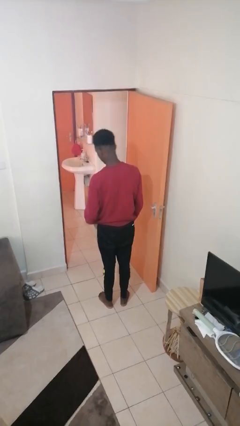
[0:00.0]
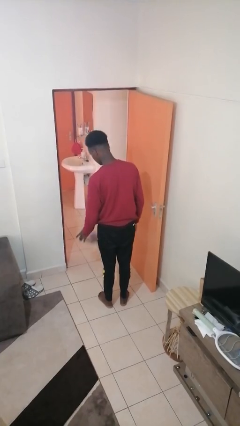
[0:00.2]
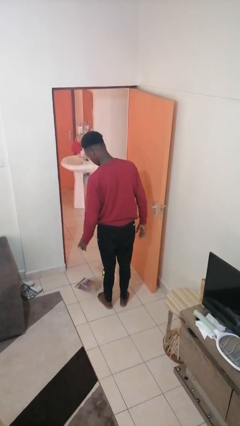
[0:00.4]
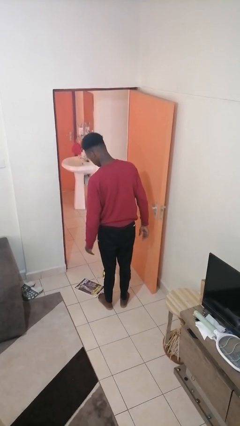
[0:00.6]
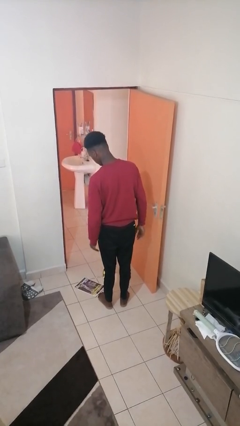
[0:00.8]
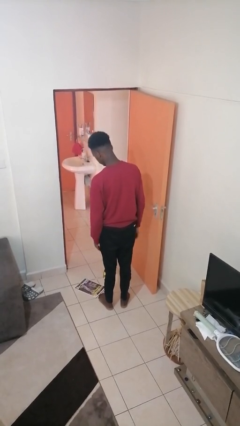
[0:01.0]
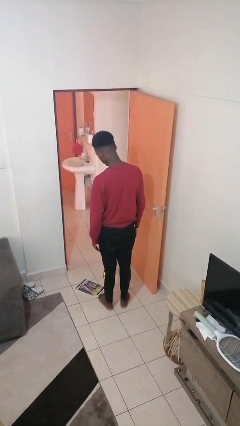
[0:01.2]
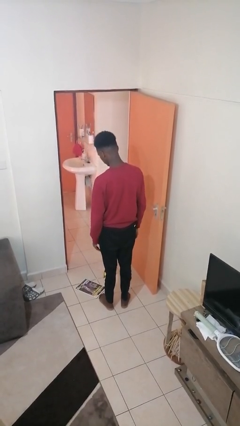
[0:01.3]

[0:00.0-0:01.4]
person drops object

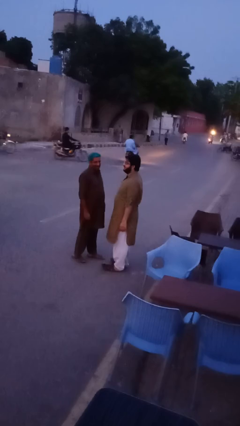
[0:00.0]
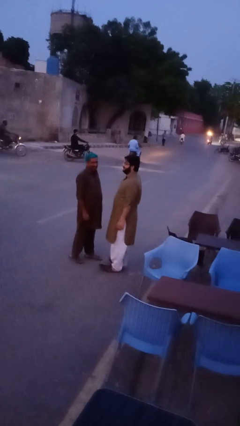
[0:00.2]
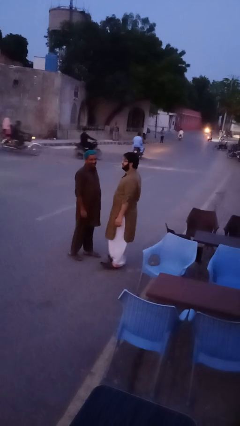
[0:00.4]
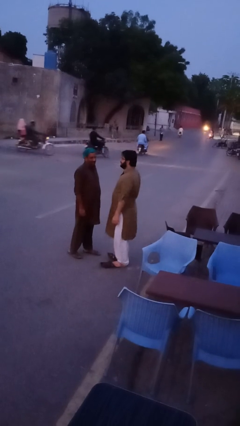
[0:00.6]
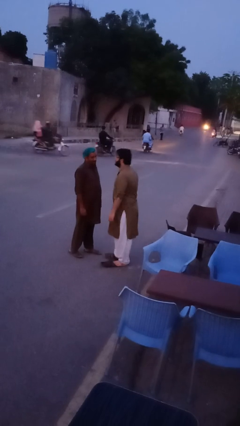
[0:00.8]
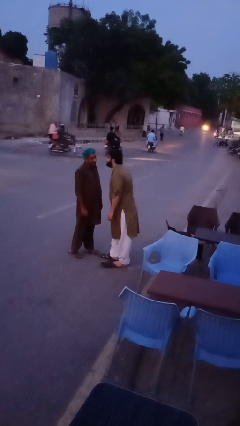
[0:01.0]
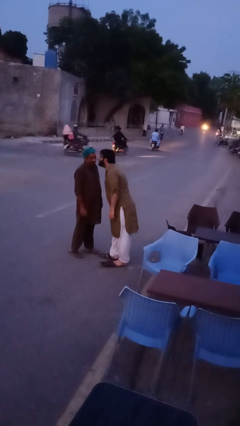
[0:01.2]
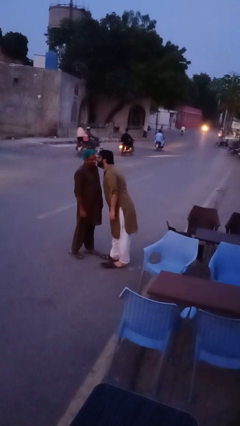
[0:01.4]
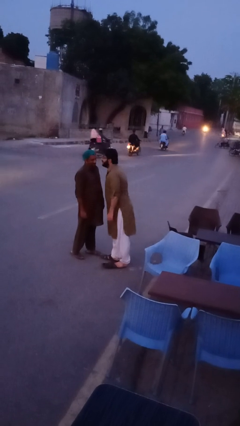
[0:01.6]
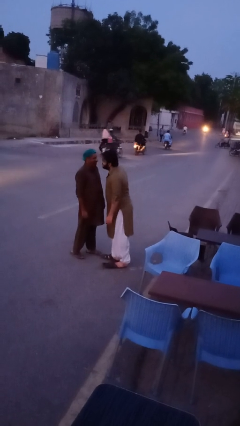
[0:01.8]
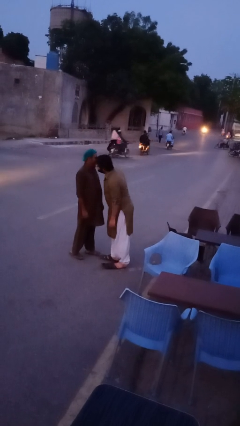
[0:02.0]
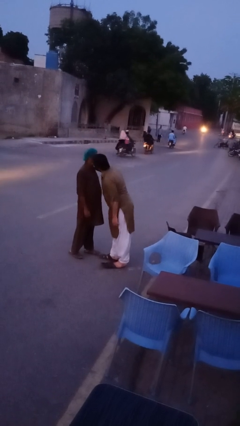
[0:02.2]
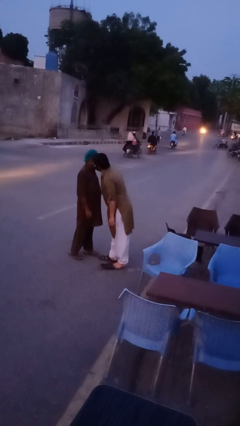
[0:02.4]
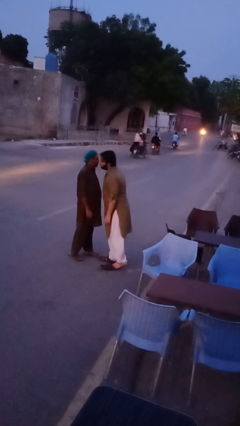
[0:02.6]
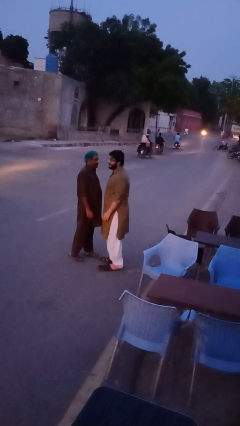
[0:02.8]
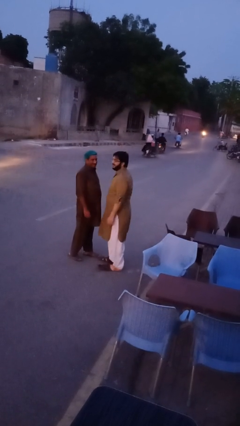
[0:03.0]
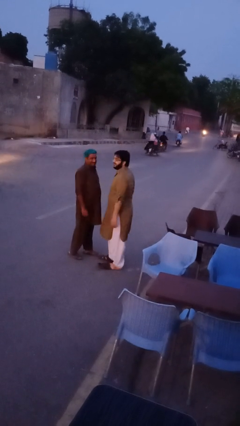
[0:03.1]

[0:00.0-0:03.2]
person kisses cheek of person

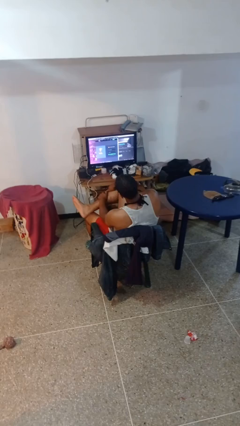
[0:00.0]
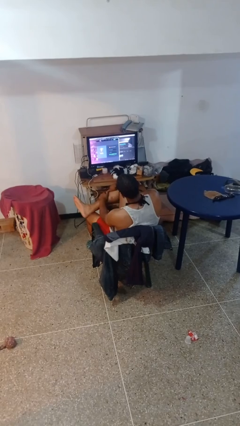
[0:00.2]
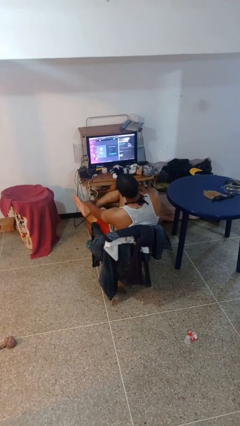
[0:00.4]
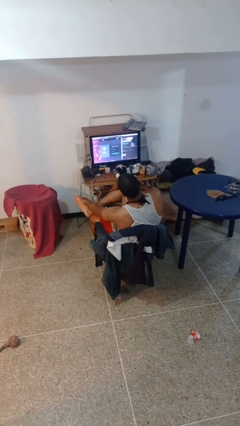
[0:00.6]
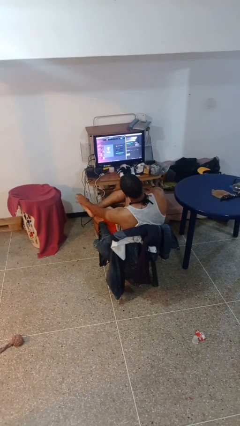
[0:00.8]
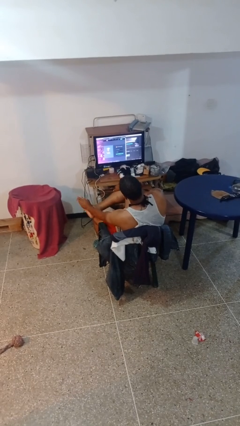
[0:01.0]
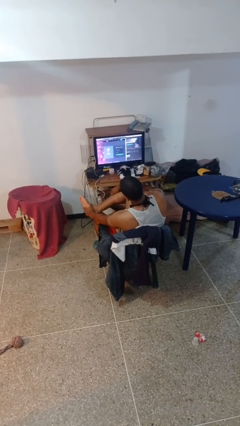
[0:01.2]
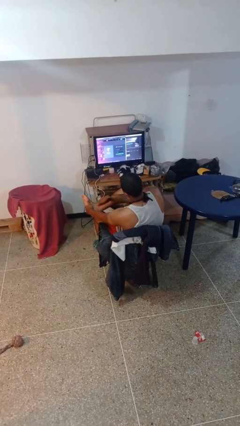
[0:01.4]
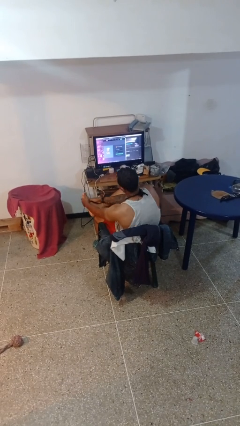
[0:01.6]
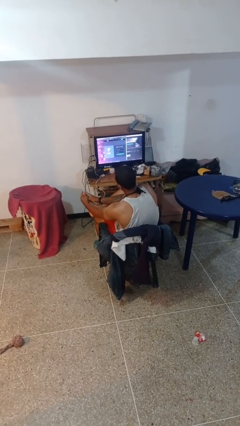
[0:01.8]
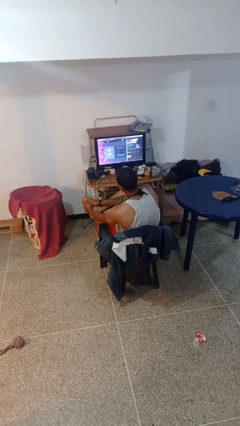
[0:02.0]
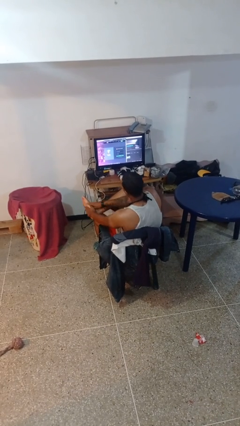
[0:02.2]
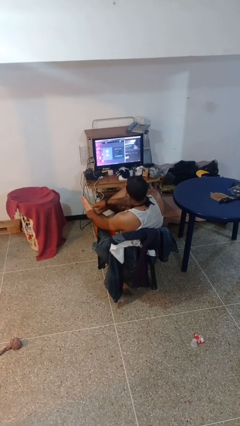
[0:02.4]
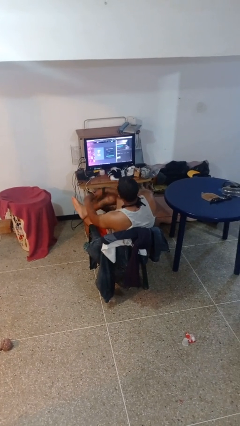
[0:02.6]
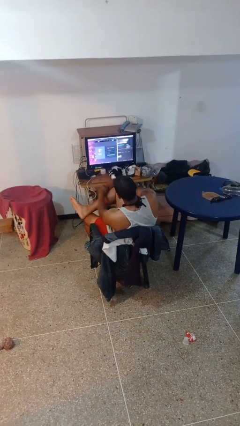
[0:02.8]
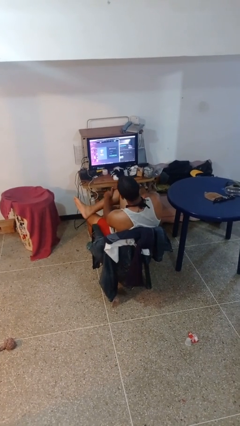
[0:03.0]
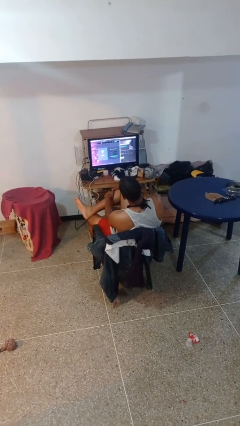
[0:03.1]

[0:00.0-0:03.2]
person rubs foot

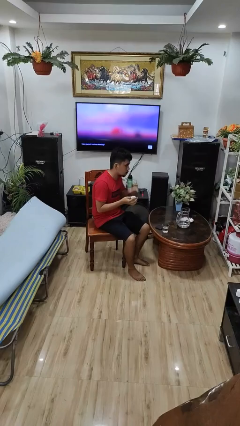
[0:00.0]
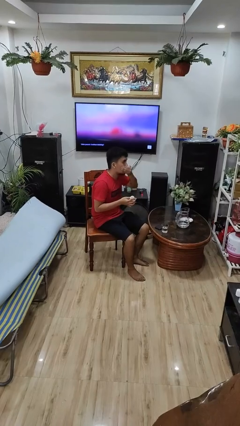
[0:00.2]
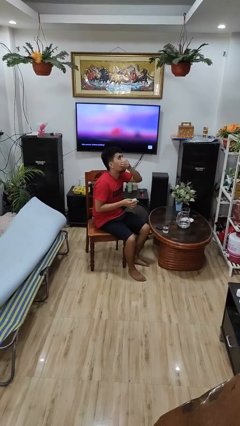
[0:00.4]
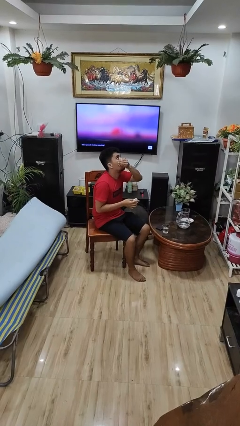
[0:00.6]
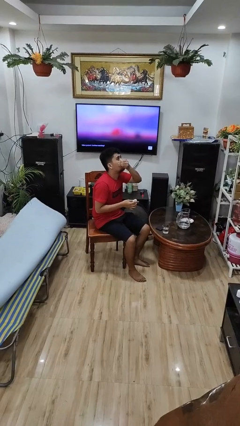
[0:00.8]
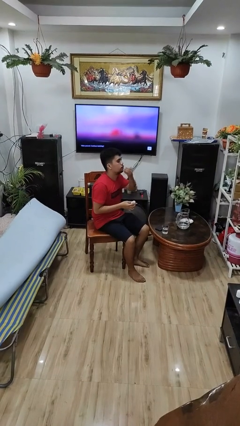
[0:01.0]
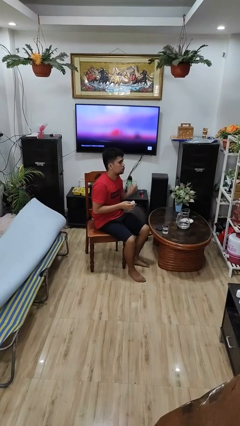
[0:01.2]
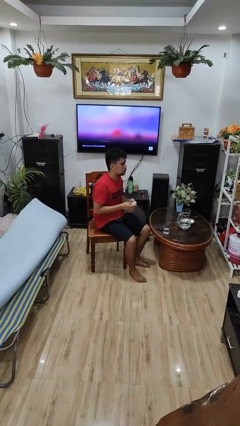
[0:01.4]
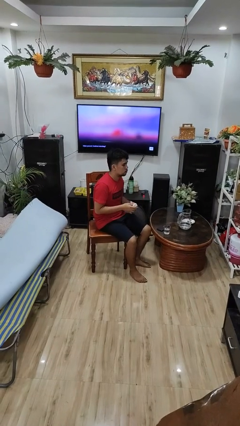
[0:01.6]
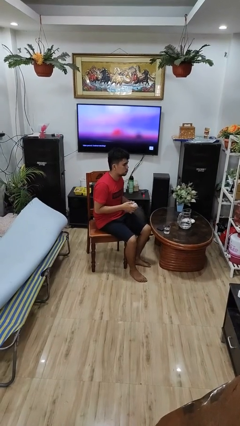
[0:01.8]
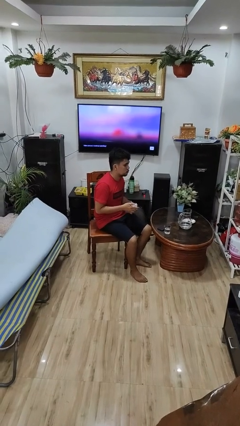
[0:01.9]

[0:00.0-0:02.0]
person takes medicine pills

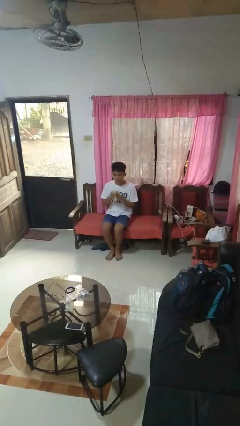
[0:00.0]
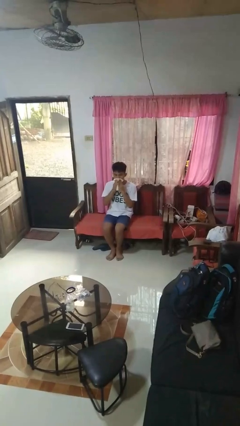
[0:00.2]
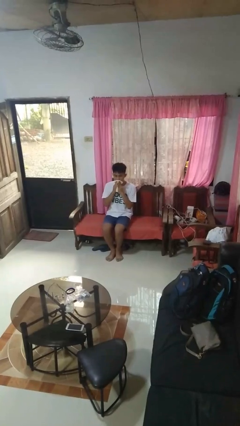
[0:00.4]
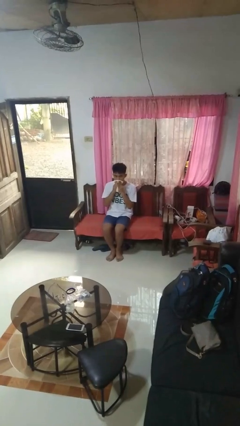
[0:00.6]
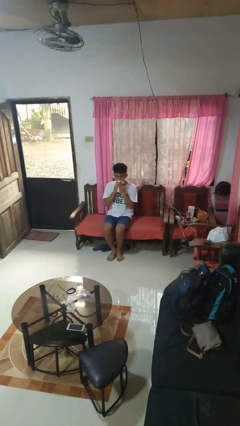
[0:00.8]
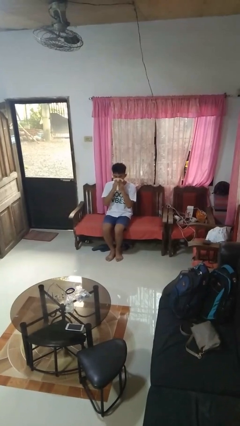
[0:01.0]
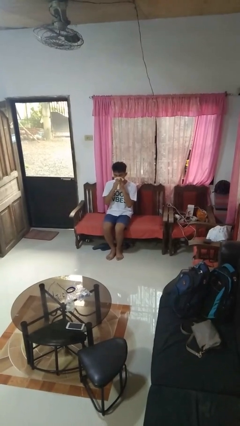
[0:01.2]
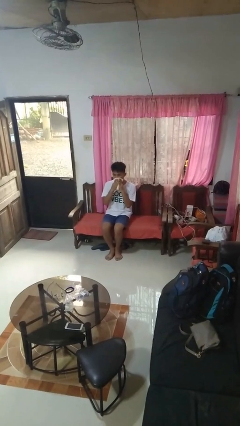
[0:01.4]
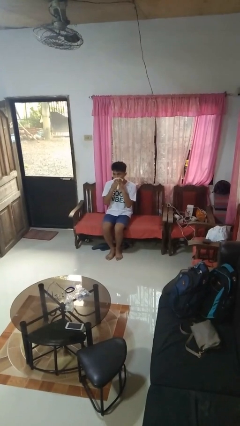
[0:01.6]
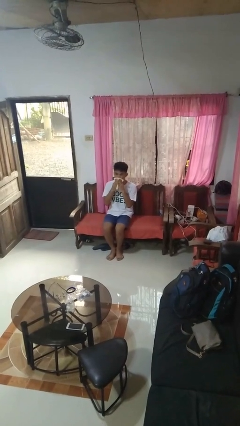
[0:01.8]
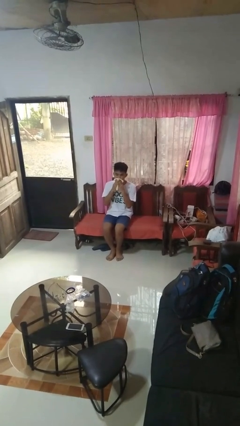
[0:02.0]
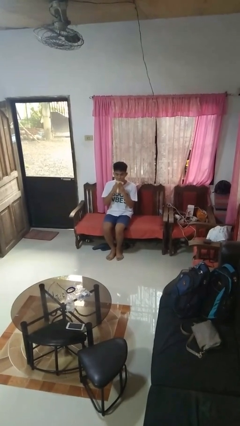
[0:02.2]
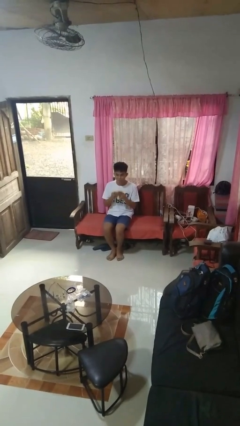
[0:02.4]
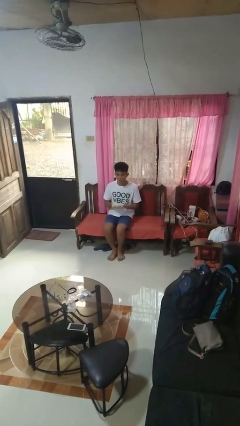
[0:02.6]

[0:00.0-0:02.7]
person wipes mouth with napkin

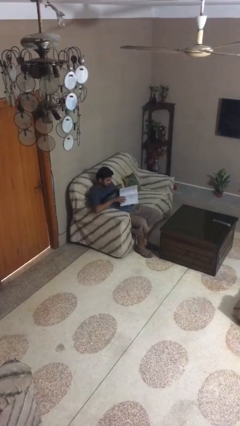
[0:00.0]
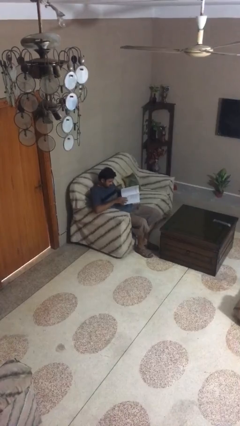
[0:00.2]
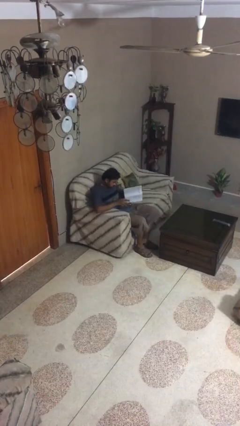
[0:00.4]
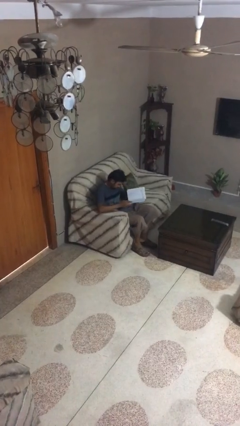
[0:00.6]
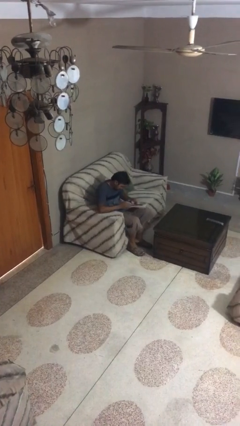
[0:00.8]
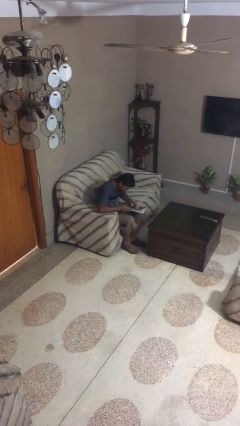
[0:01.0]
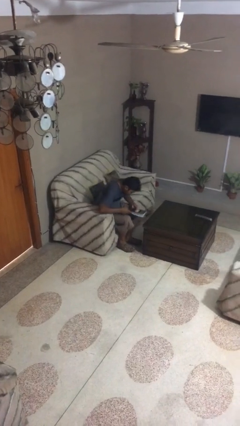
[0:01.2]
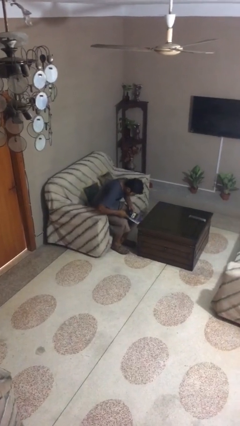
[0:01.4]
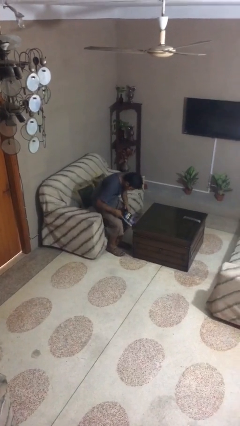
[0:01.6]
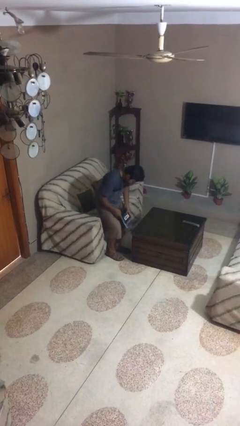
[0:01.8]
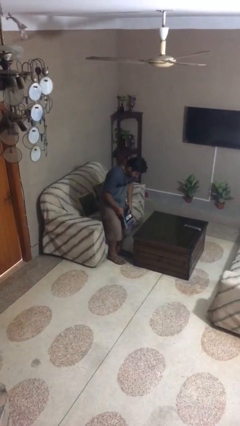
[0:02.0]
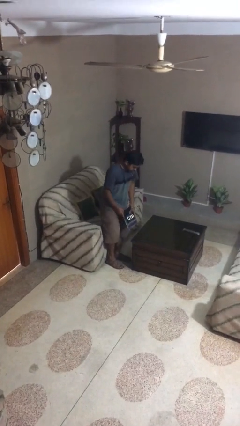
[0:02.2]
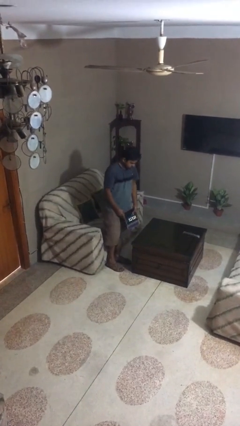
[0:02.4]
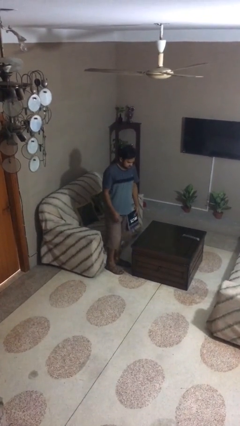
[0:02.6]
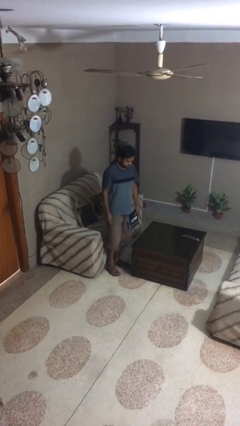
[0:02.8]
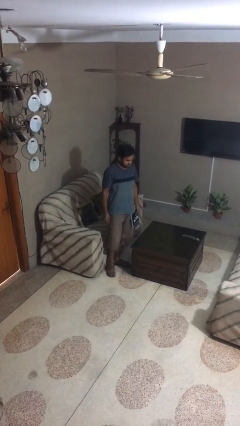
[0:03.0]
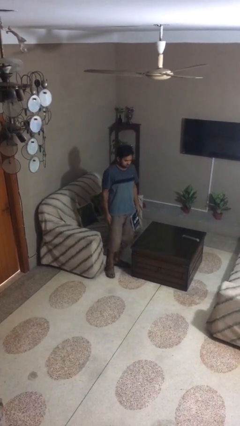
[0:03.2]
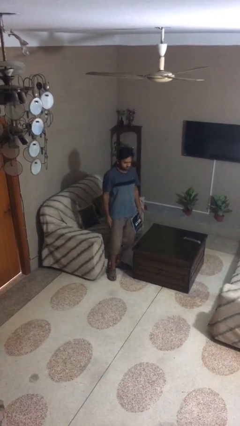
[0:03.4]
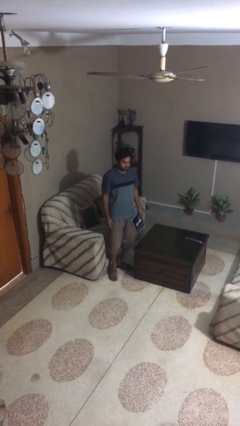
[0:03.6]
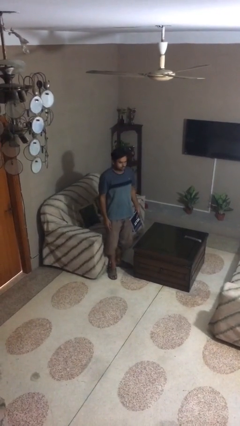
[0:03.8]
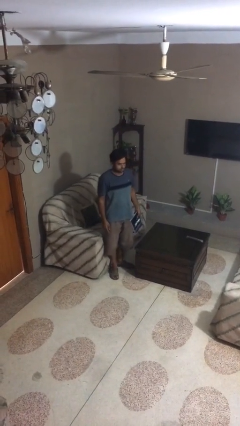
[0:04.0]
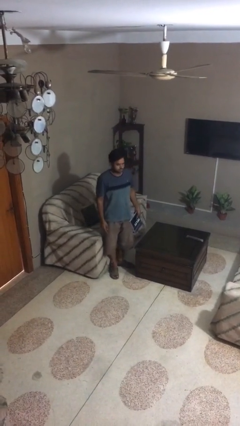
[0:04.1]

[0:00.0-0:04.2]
person stands up

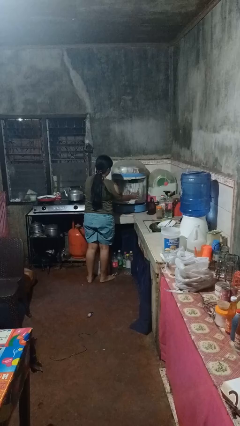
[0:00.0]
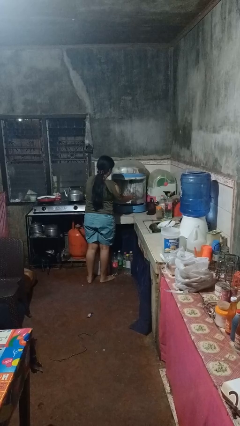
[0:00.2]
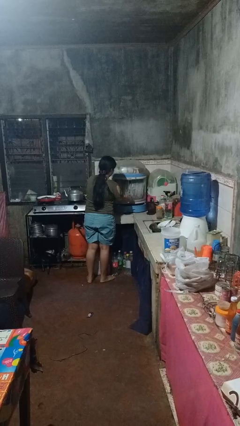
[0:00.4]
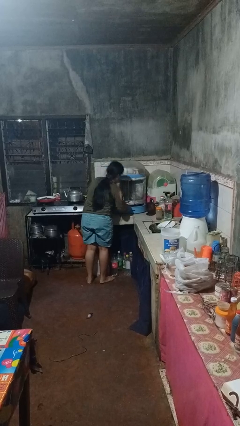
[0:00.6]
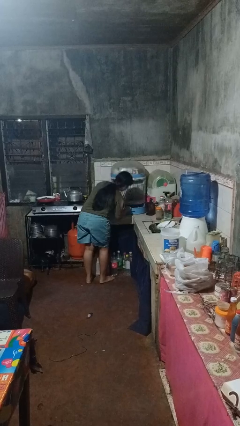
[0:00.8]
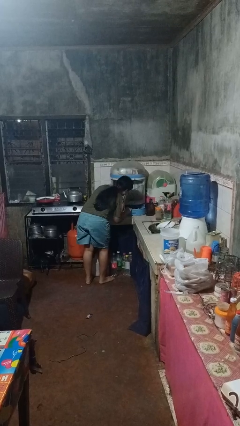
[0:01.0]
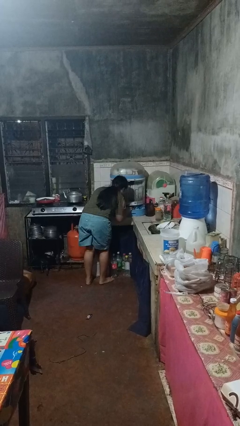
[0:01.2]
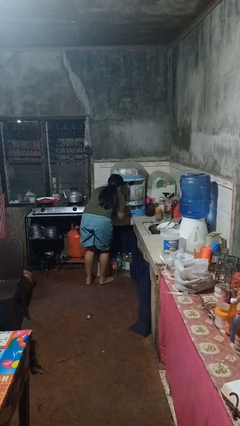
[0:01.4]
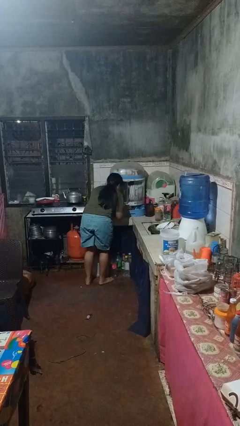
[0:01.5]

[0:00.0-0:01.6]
person searches in kitchen drawer
